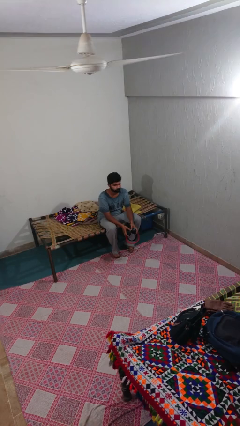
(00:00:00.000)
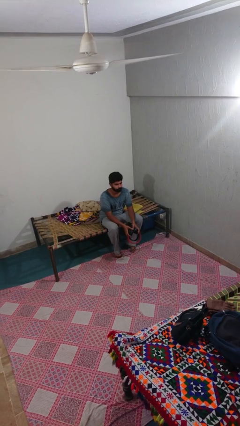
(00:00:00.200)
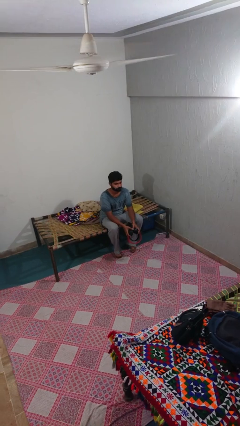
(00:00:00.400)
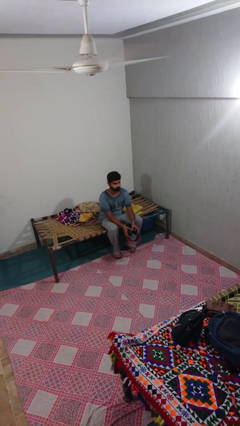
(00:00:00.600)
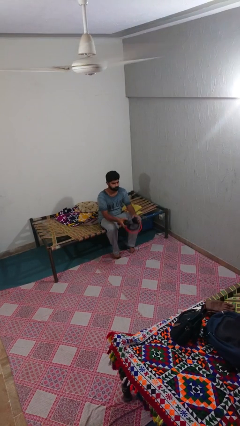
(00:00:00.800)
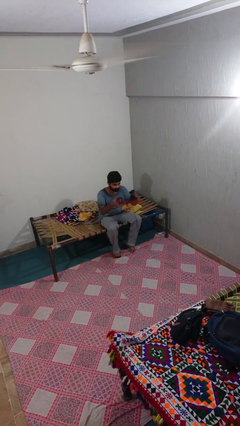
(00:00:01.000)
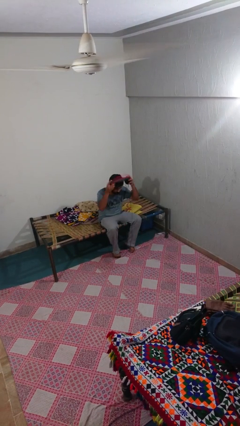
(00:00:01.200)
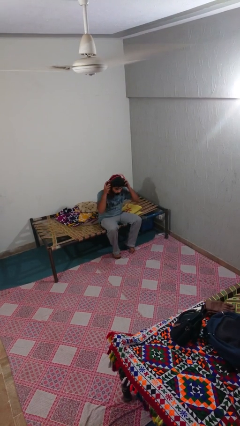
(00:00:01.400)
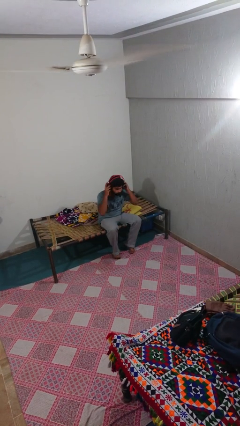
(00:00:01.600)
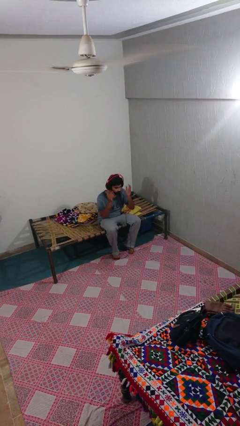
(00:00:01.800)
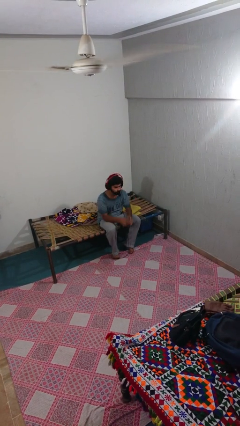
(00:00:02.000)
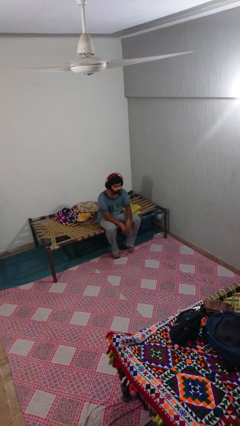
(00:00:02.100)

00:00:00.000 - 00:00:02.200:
person puts on headphones

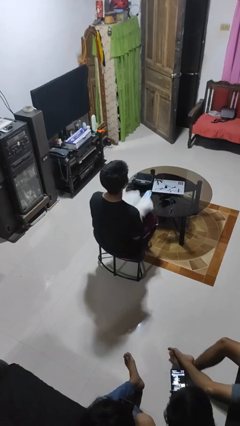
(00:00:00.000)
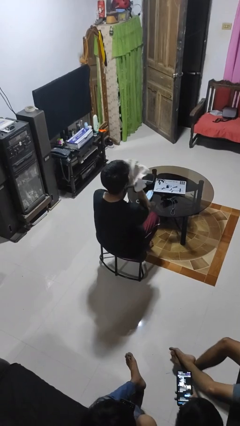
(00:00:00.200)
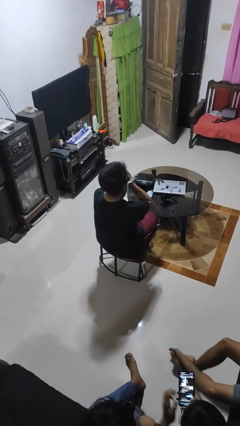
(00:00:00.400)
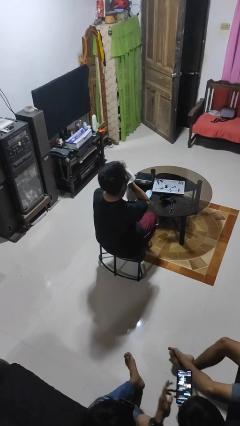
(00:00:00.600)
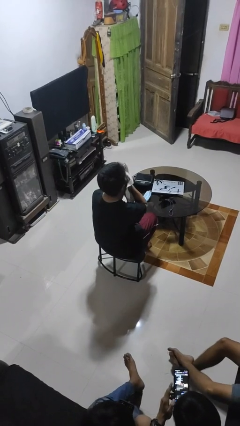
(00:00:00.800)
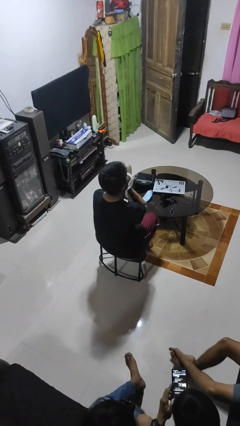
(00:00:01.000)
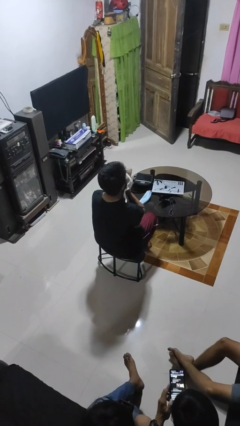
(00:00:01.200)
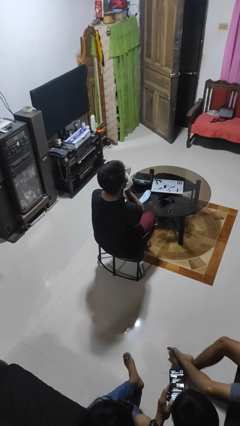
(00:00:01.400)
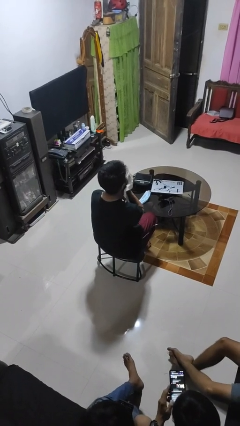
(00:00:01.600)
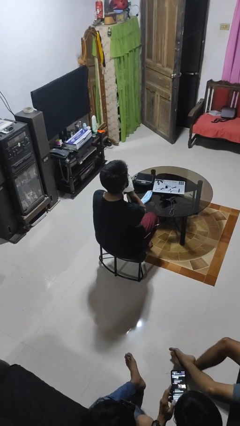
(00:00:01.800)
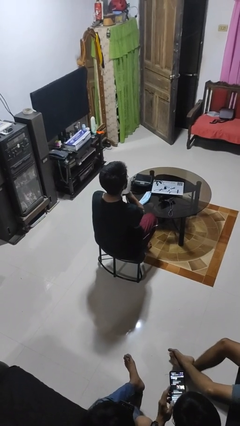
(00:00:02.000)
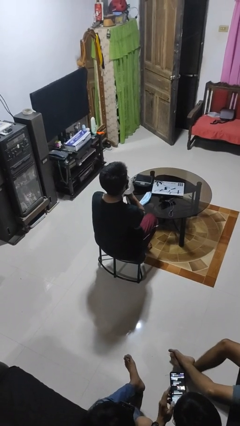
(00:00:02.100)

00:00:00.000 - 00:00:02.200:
person wipes mouth with napkin

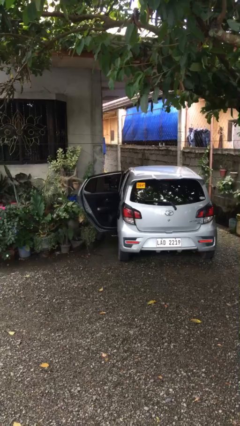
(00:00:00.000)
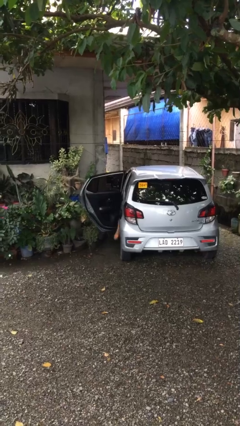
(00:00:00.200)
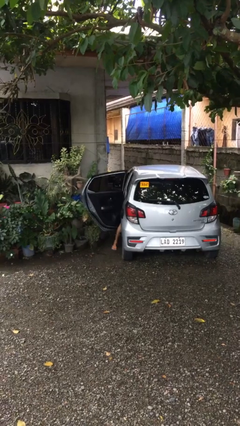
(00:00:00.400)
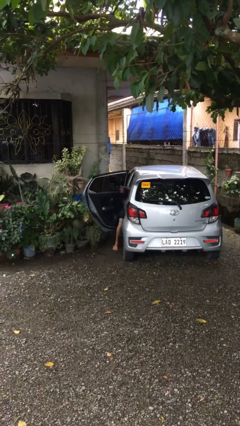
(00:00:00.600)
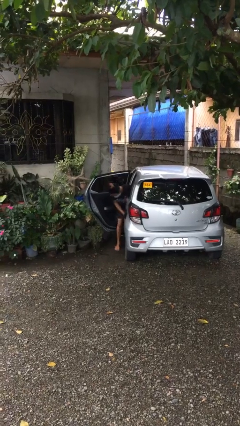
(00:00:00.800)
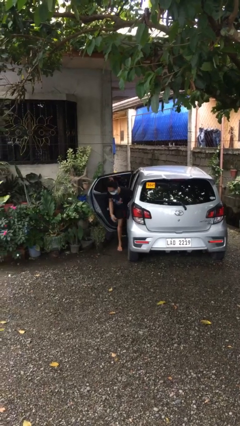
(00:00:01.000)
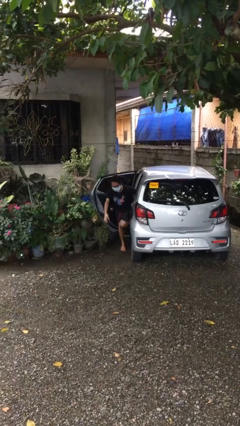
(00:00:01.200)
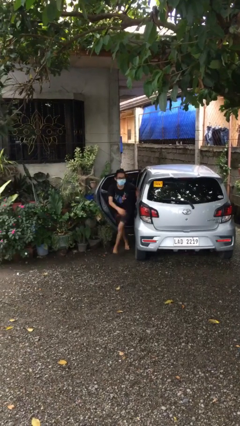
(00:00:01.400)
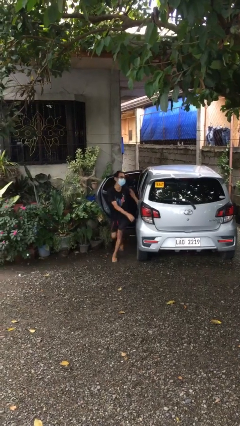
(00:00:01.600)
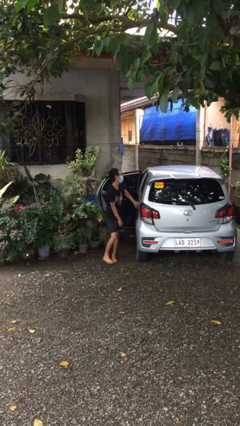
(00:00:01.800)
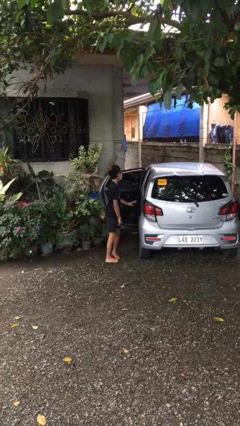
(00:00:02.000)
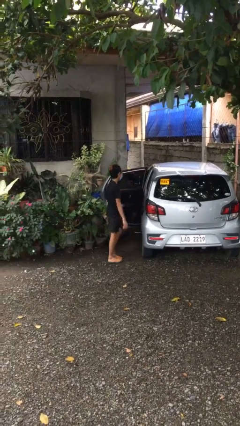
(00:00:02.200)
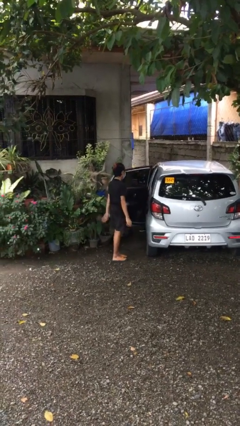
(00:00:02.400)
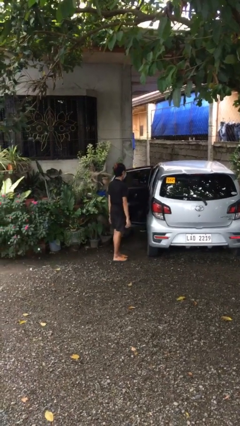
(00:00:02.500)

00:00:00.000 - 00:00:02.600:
person exits car

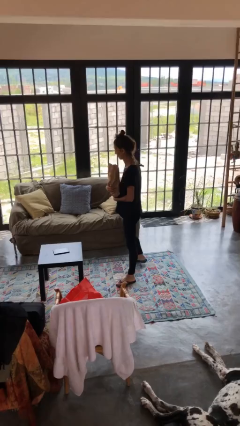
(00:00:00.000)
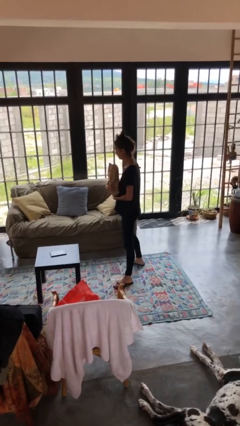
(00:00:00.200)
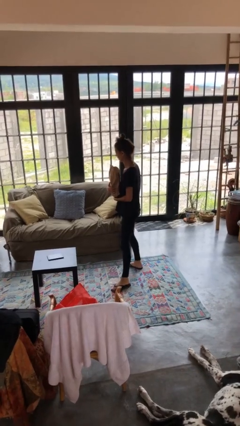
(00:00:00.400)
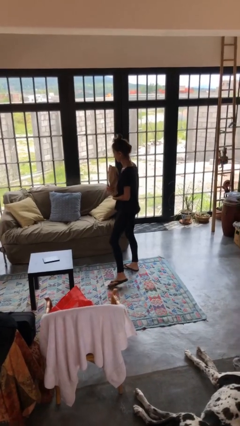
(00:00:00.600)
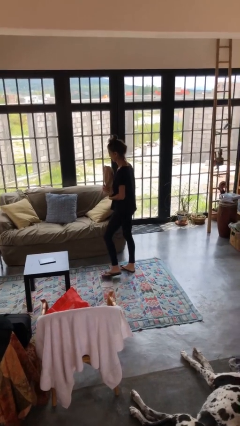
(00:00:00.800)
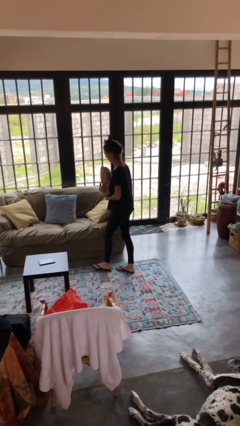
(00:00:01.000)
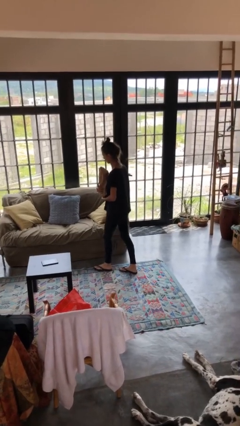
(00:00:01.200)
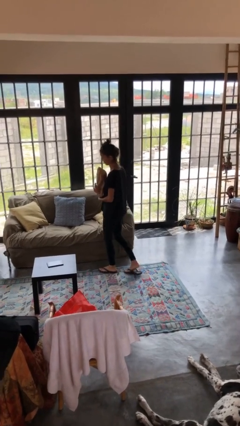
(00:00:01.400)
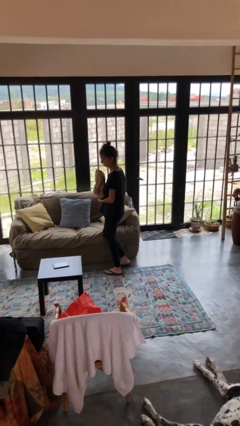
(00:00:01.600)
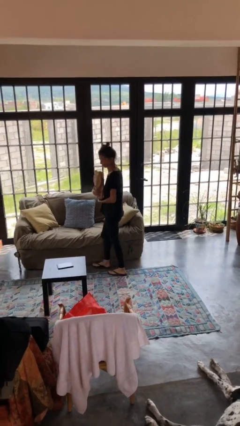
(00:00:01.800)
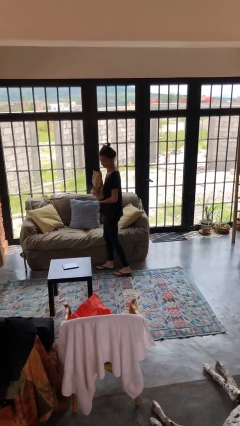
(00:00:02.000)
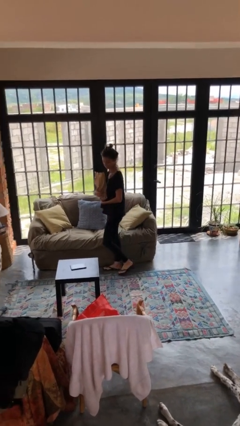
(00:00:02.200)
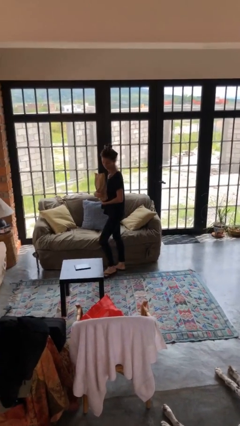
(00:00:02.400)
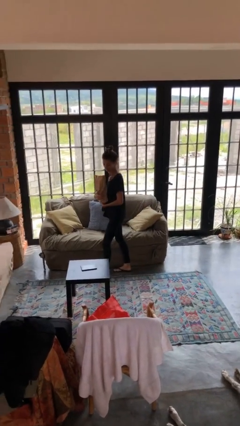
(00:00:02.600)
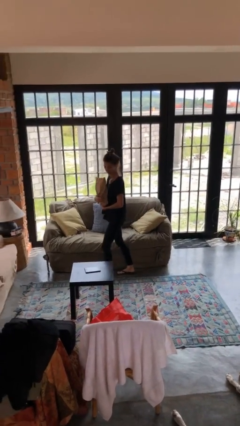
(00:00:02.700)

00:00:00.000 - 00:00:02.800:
person carries groceries

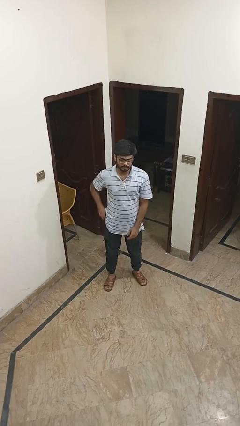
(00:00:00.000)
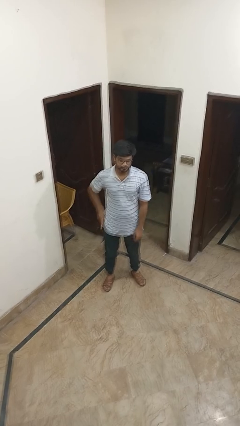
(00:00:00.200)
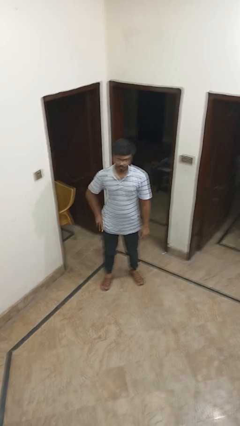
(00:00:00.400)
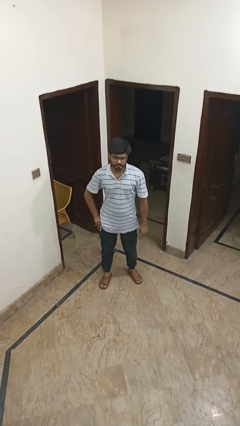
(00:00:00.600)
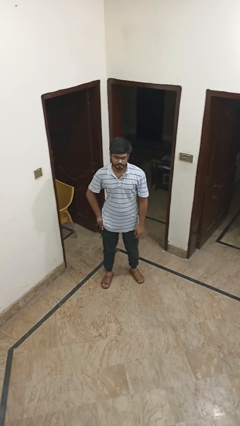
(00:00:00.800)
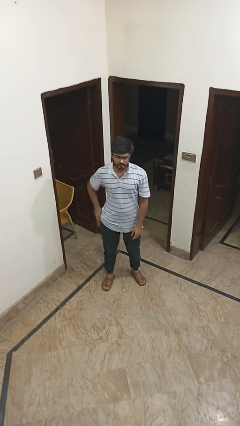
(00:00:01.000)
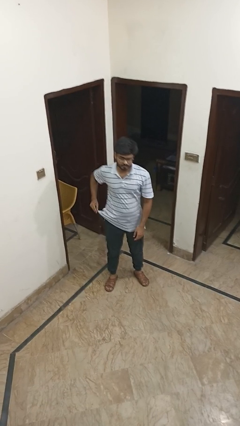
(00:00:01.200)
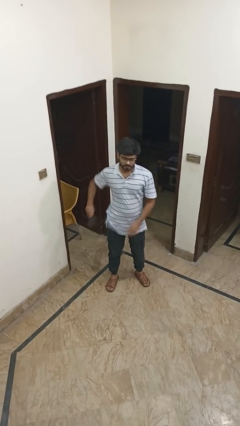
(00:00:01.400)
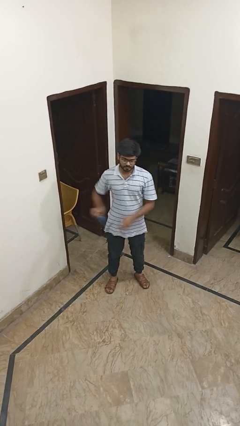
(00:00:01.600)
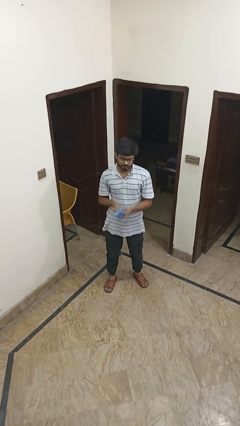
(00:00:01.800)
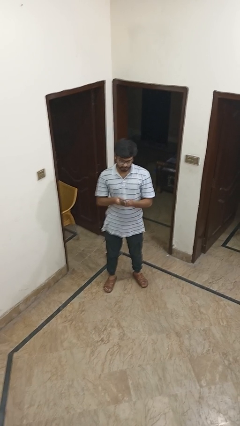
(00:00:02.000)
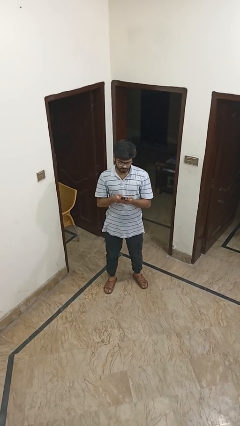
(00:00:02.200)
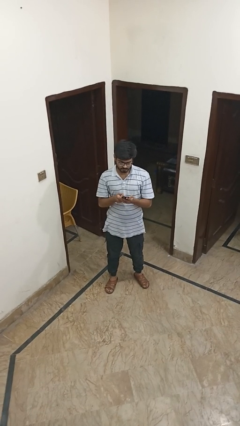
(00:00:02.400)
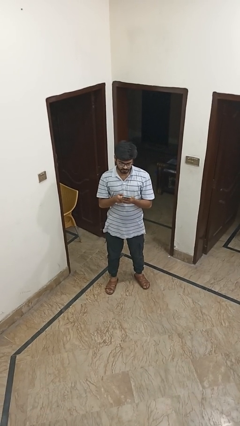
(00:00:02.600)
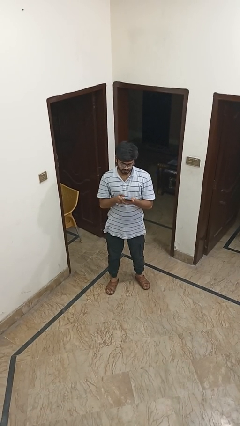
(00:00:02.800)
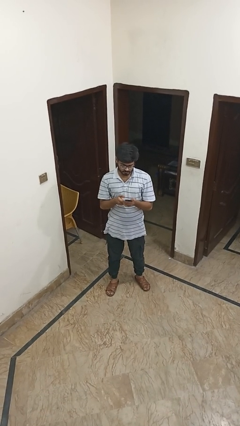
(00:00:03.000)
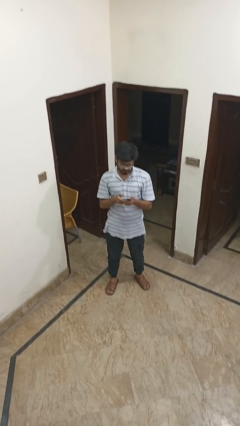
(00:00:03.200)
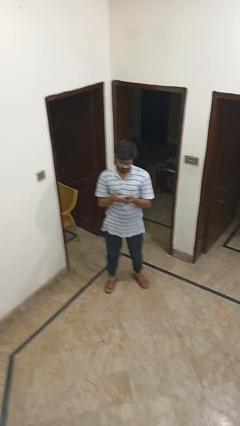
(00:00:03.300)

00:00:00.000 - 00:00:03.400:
person takes phone from pocket

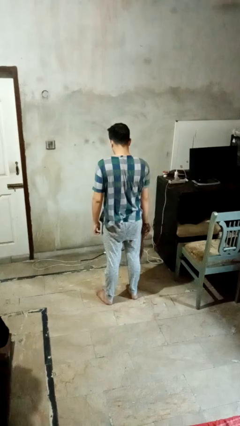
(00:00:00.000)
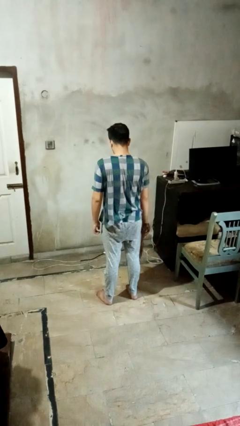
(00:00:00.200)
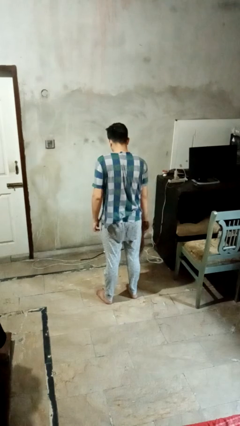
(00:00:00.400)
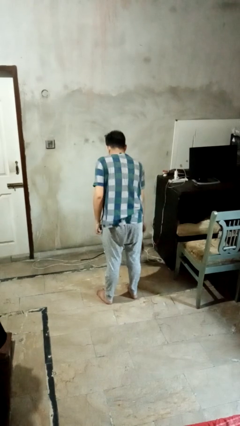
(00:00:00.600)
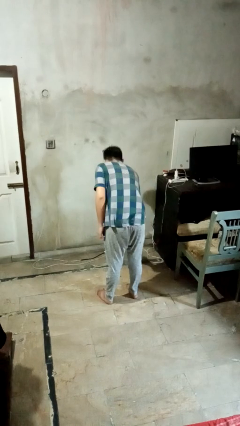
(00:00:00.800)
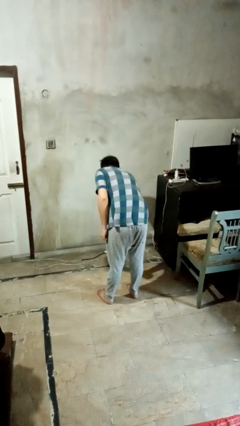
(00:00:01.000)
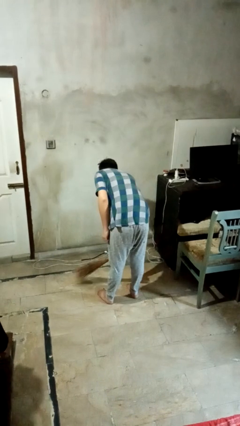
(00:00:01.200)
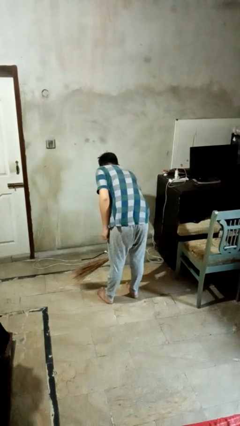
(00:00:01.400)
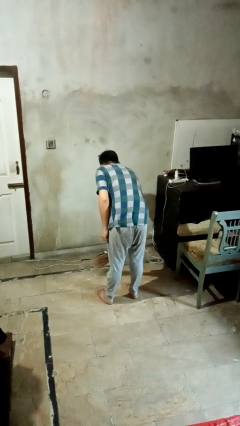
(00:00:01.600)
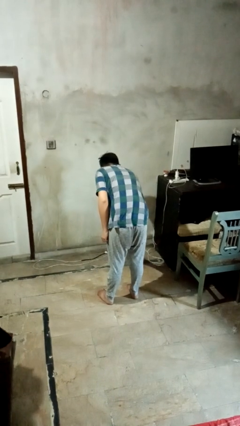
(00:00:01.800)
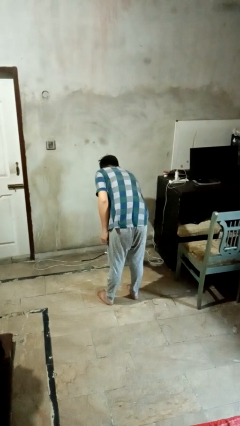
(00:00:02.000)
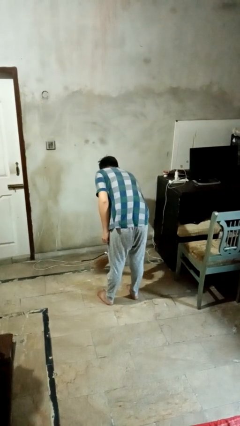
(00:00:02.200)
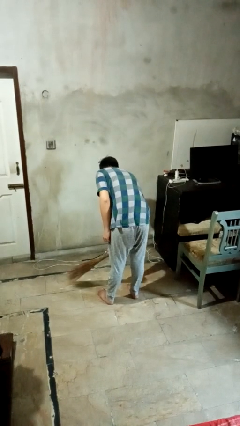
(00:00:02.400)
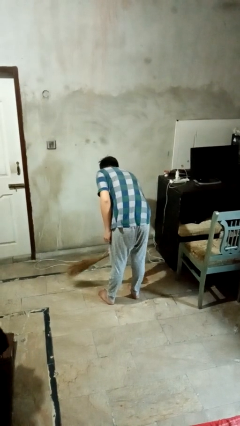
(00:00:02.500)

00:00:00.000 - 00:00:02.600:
person sweeps floor

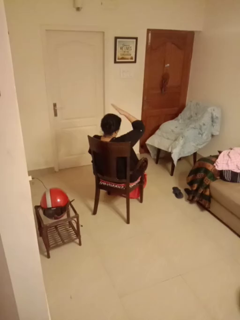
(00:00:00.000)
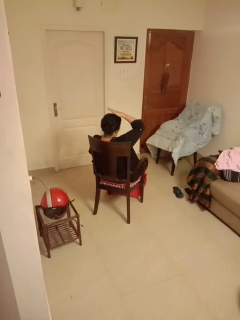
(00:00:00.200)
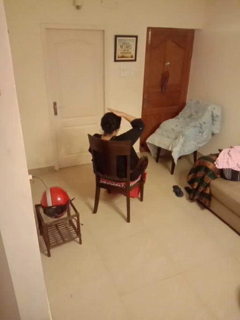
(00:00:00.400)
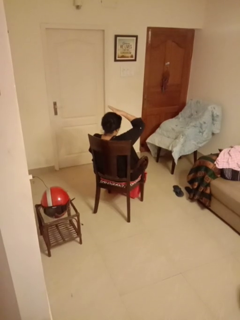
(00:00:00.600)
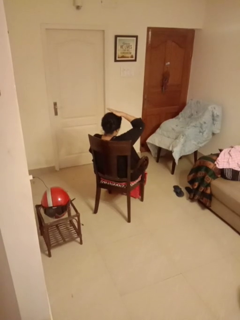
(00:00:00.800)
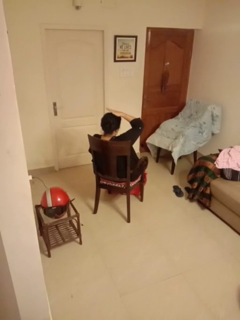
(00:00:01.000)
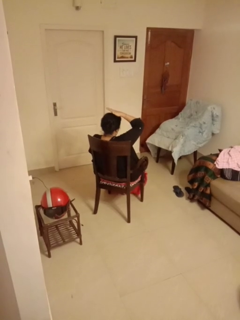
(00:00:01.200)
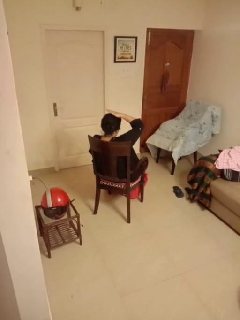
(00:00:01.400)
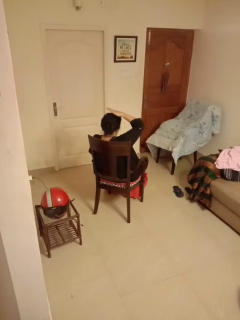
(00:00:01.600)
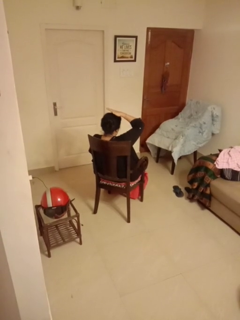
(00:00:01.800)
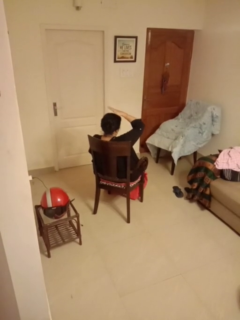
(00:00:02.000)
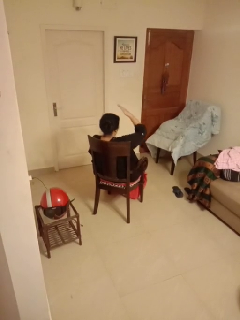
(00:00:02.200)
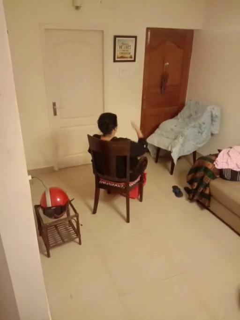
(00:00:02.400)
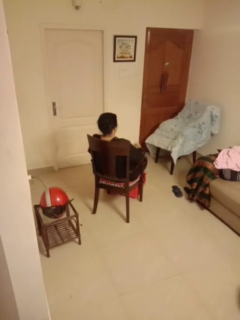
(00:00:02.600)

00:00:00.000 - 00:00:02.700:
person pats head
